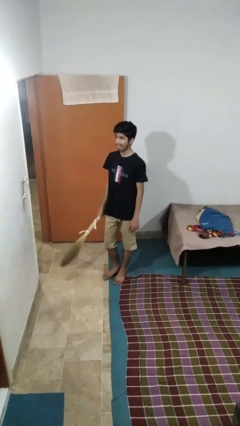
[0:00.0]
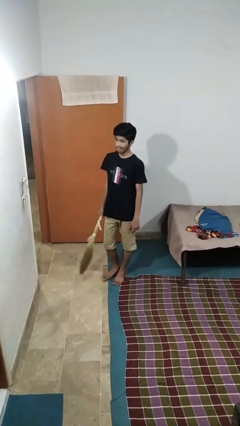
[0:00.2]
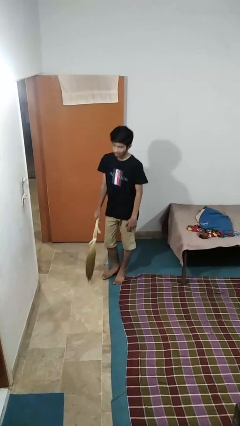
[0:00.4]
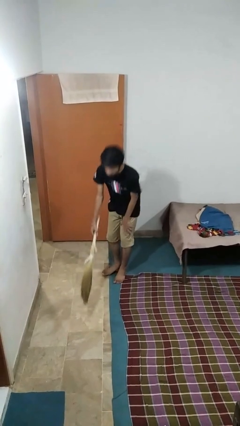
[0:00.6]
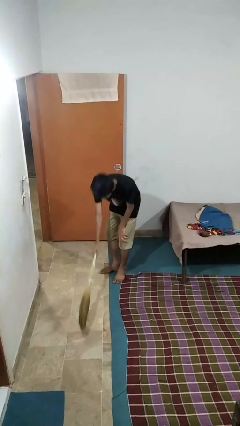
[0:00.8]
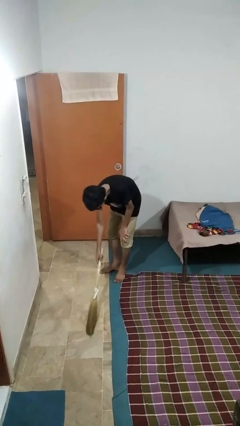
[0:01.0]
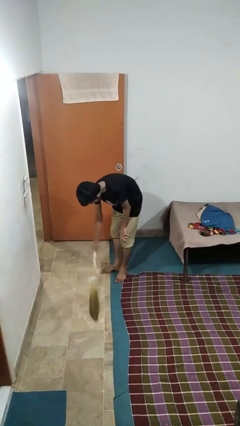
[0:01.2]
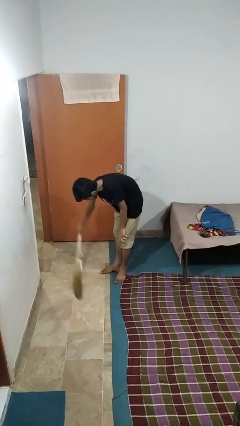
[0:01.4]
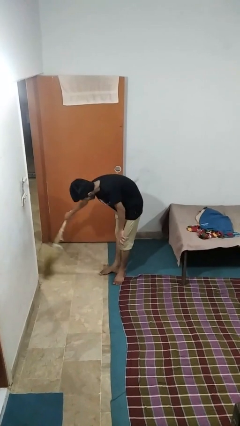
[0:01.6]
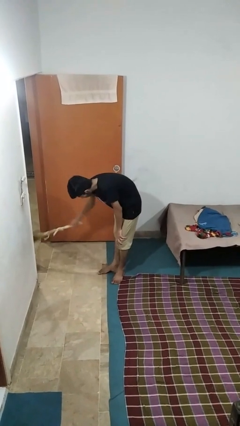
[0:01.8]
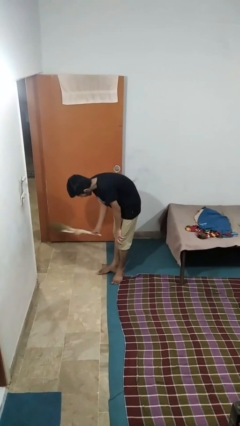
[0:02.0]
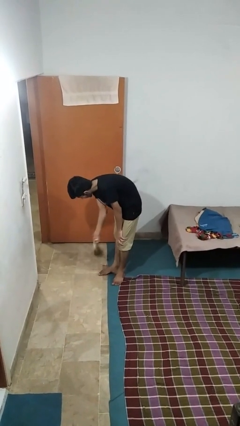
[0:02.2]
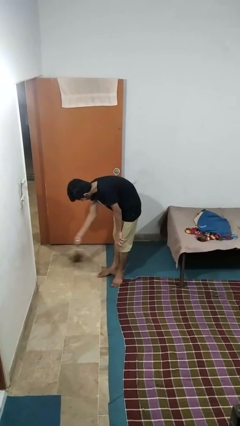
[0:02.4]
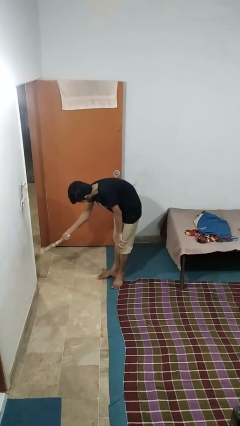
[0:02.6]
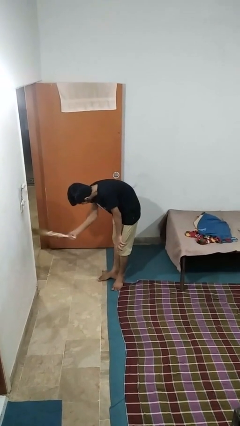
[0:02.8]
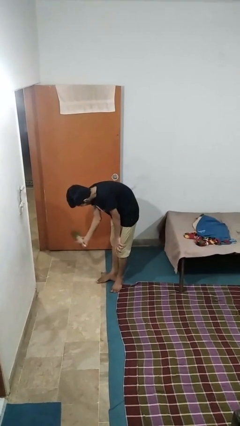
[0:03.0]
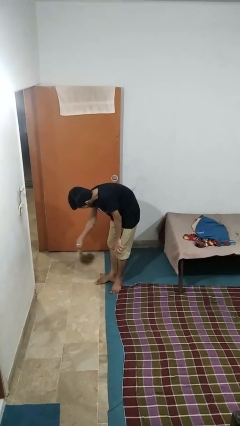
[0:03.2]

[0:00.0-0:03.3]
person sweeps floor

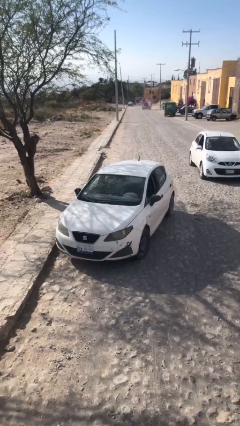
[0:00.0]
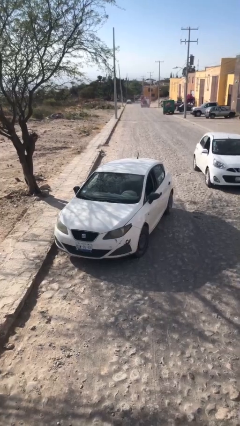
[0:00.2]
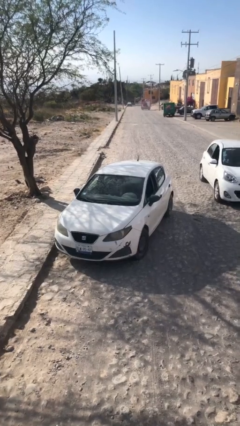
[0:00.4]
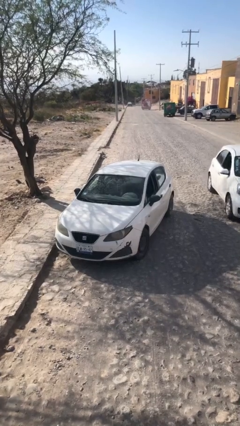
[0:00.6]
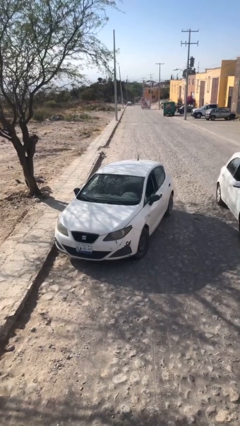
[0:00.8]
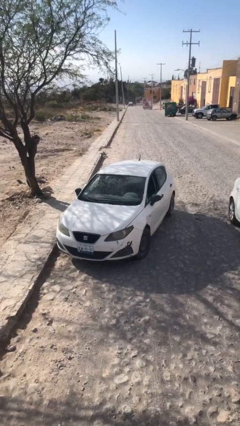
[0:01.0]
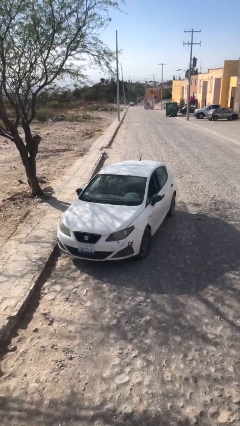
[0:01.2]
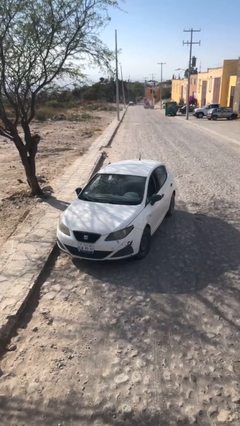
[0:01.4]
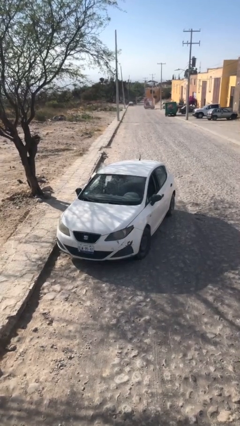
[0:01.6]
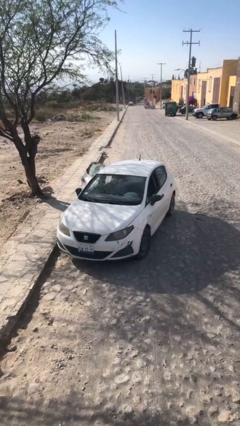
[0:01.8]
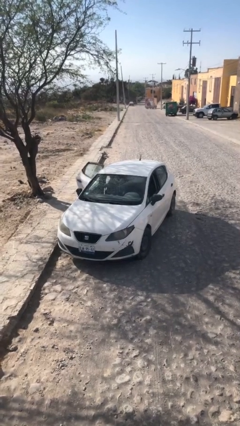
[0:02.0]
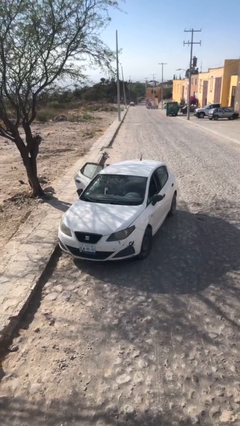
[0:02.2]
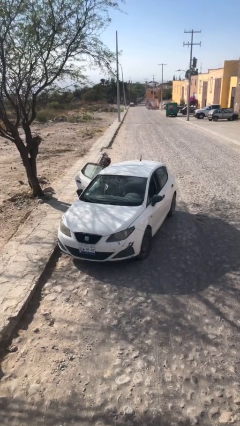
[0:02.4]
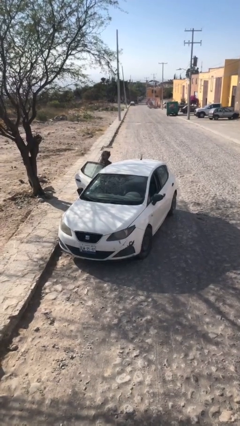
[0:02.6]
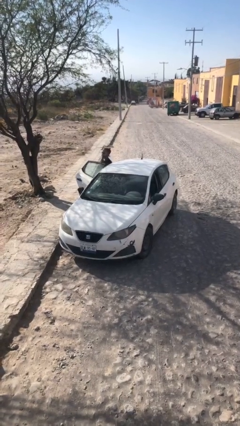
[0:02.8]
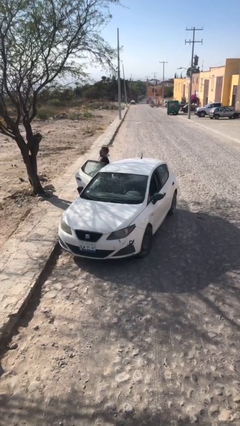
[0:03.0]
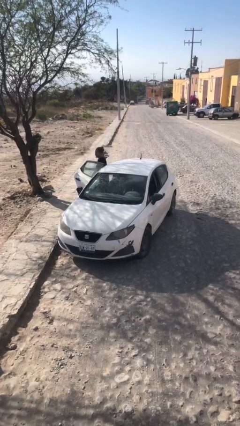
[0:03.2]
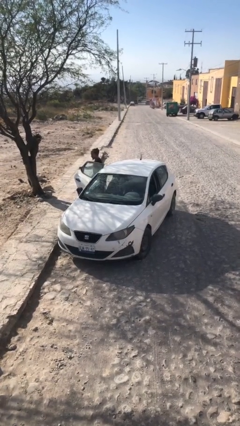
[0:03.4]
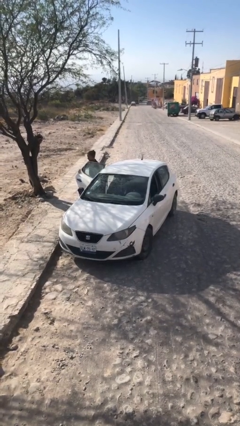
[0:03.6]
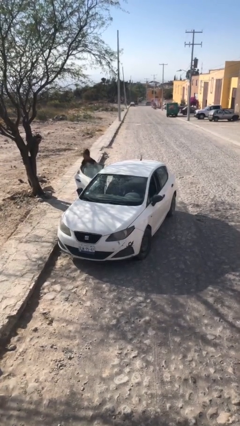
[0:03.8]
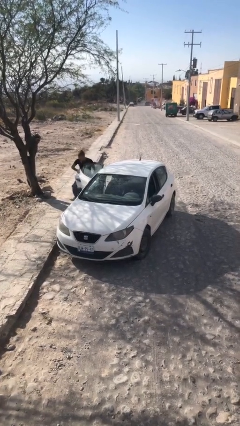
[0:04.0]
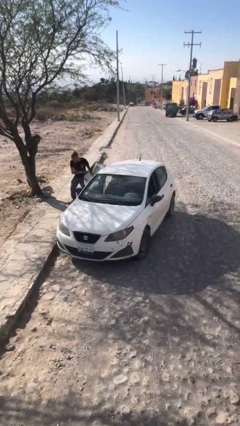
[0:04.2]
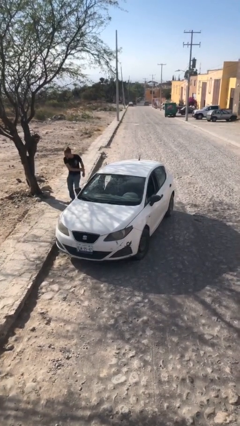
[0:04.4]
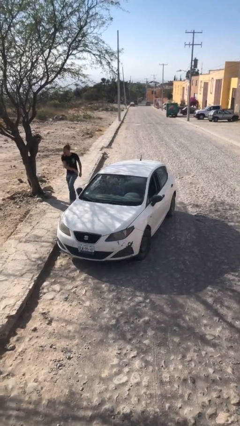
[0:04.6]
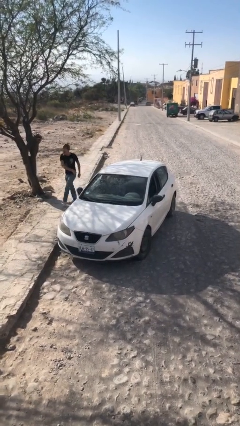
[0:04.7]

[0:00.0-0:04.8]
car drops off person

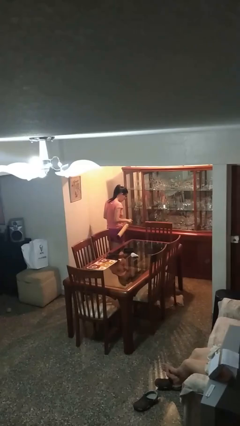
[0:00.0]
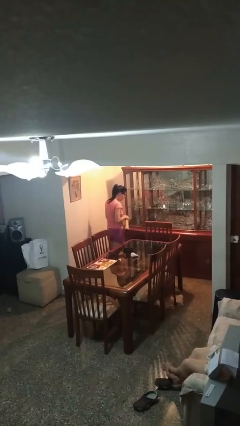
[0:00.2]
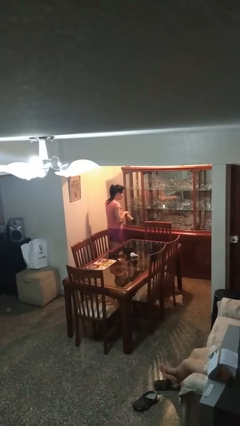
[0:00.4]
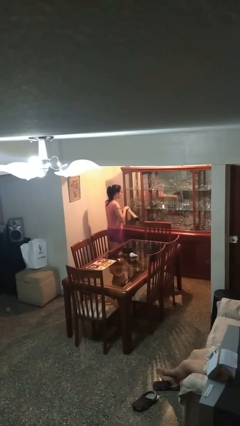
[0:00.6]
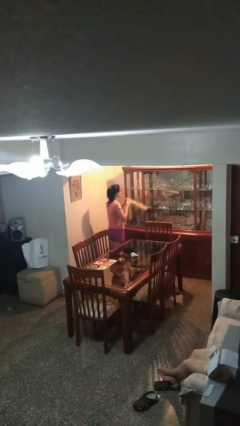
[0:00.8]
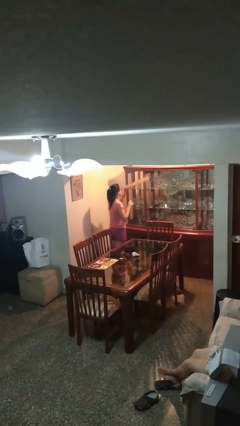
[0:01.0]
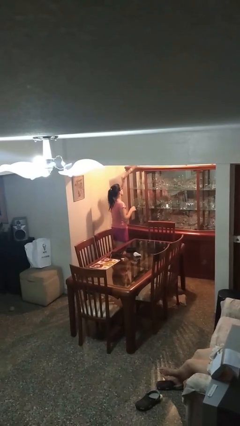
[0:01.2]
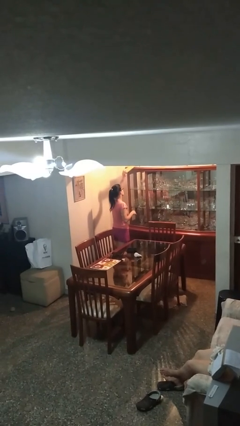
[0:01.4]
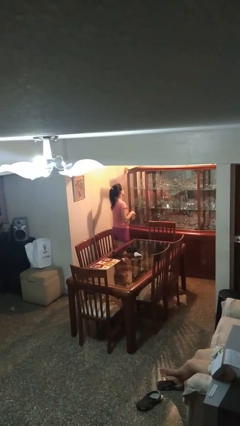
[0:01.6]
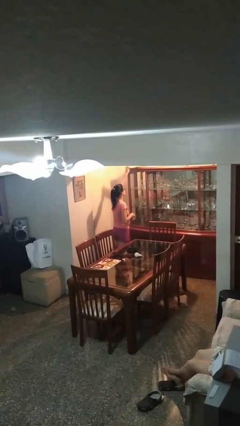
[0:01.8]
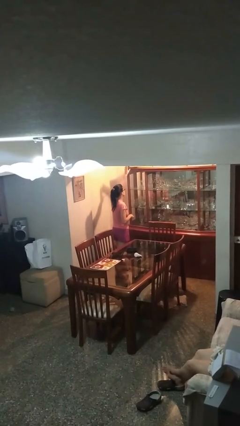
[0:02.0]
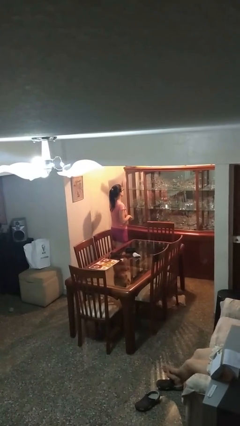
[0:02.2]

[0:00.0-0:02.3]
person puts down object on shelf

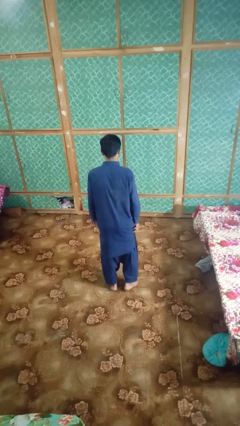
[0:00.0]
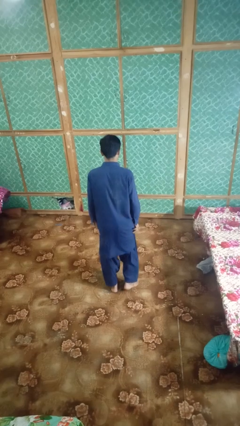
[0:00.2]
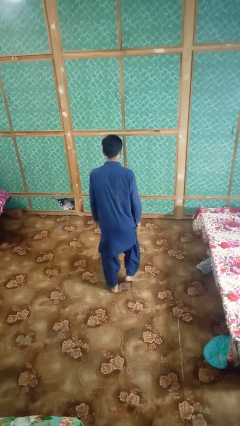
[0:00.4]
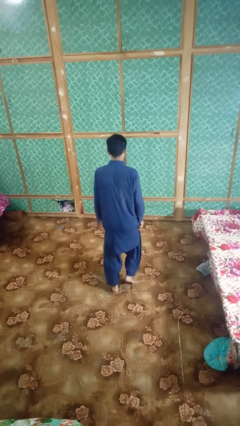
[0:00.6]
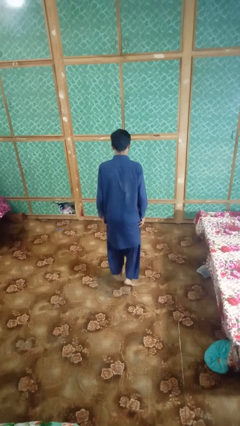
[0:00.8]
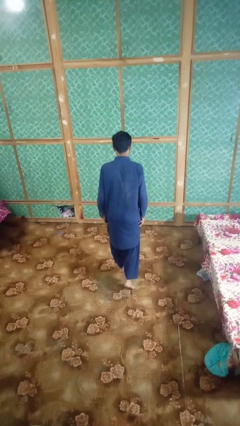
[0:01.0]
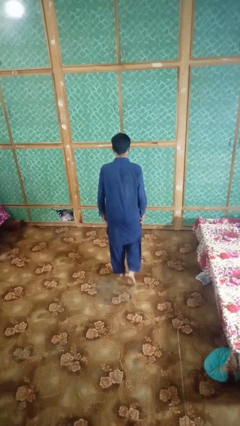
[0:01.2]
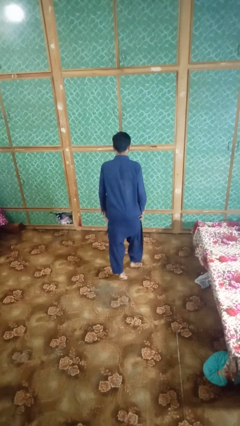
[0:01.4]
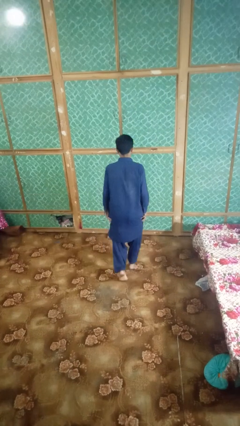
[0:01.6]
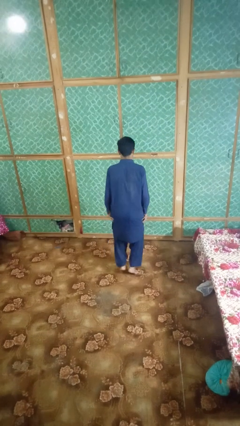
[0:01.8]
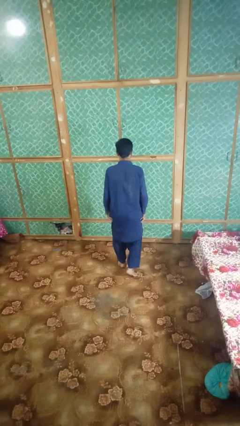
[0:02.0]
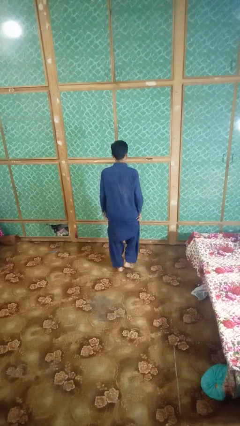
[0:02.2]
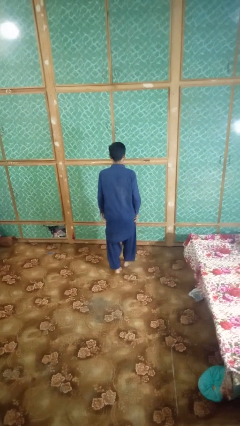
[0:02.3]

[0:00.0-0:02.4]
person walks tiptoe

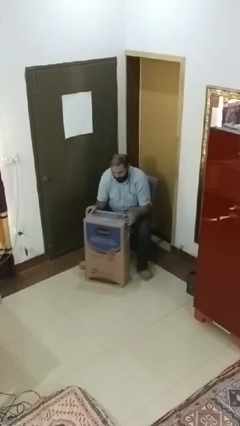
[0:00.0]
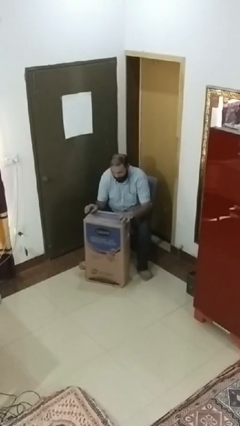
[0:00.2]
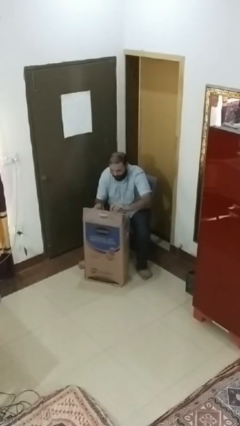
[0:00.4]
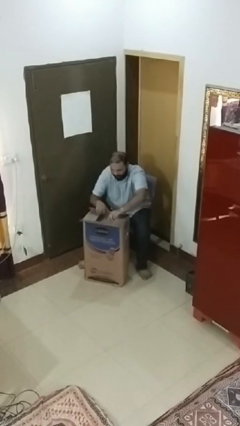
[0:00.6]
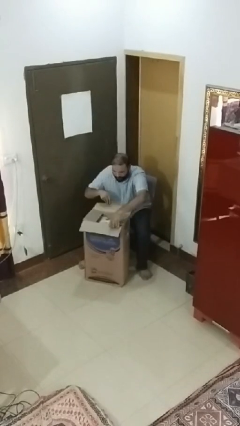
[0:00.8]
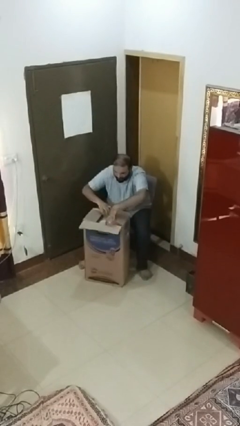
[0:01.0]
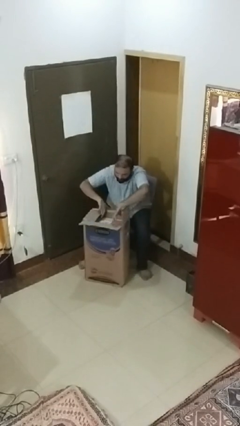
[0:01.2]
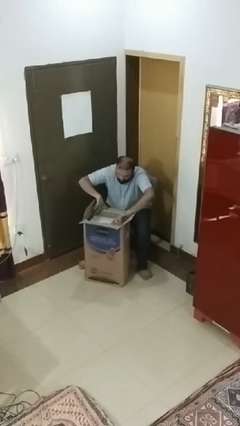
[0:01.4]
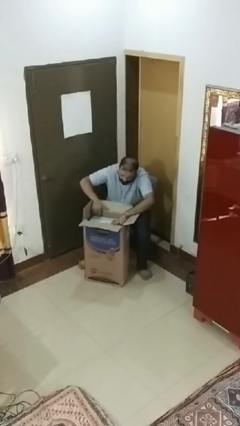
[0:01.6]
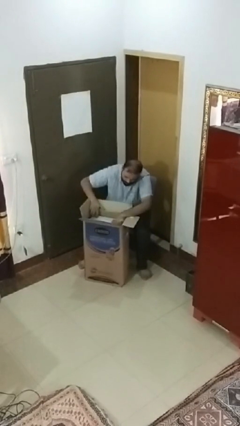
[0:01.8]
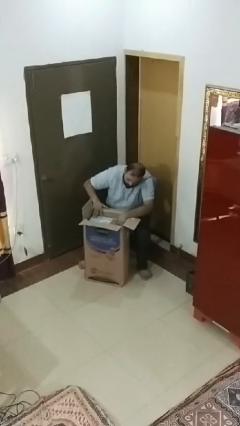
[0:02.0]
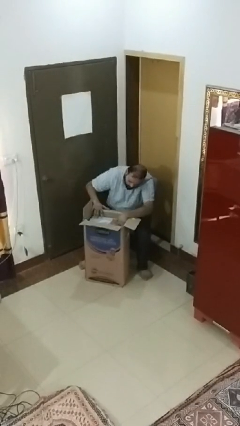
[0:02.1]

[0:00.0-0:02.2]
person searches in box

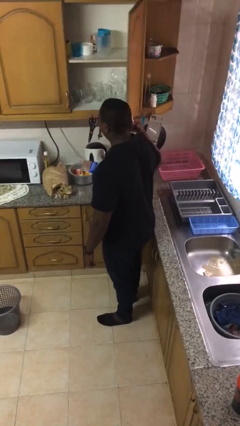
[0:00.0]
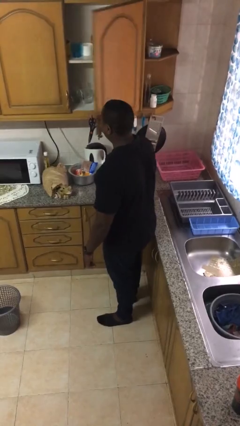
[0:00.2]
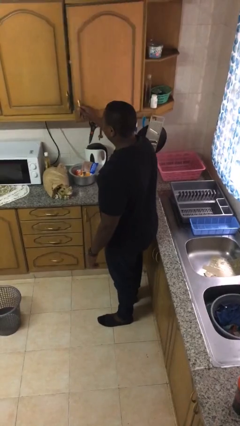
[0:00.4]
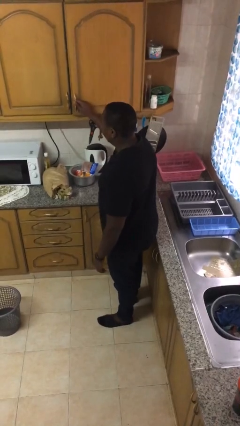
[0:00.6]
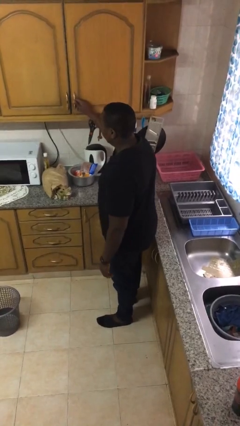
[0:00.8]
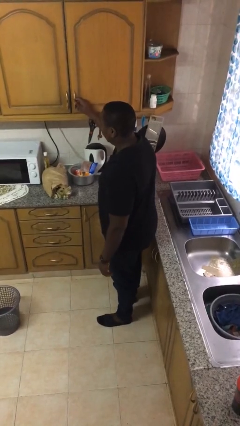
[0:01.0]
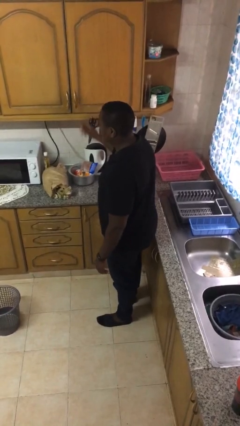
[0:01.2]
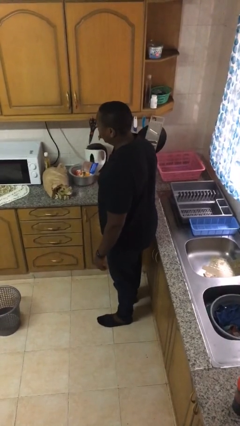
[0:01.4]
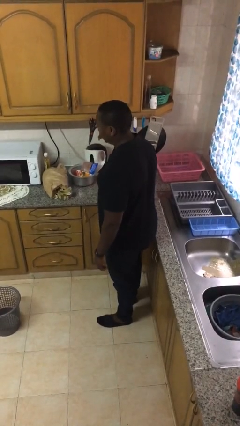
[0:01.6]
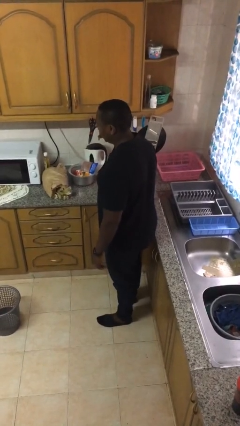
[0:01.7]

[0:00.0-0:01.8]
person closes cabinet

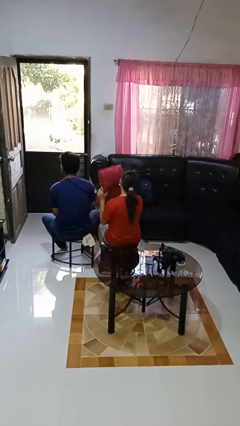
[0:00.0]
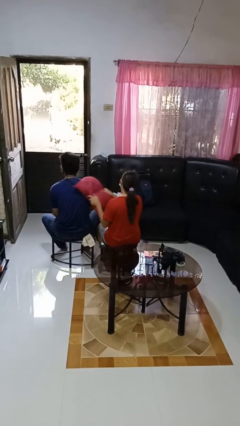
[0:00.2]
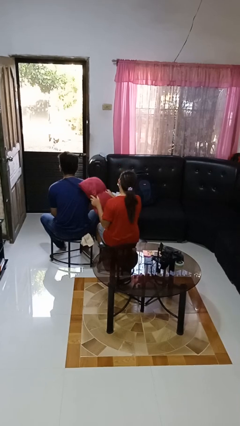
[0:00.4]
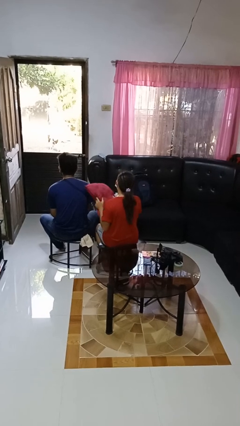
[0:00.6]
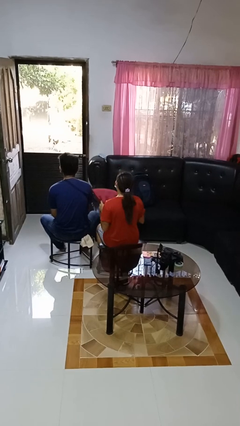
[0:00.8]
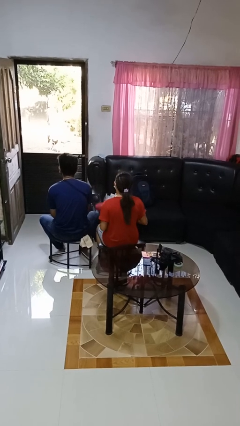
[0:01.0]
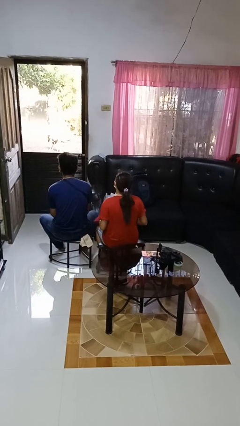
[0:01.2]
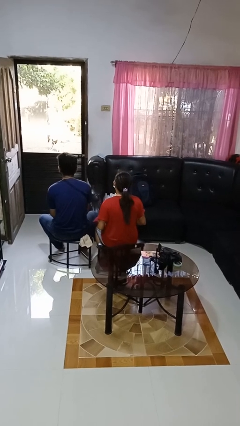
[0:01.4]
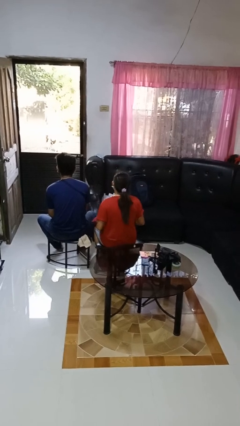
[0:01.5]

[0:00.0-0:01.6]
person hits person with pillow
